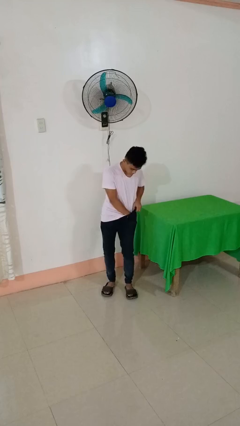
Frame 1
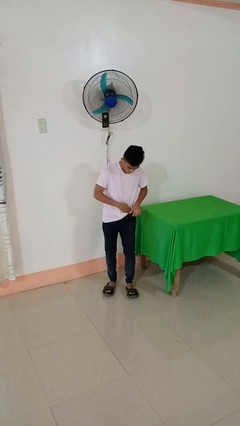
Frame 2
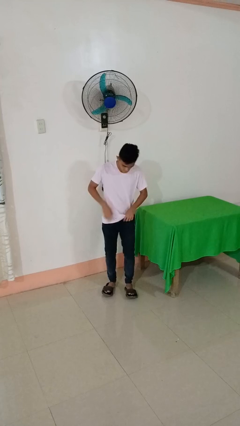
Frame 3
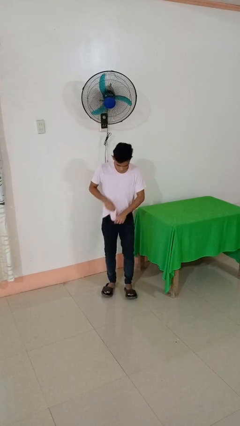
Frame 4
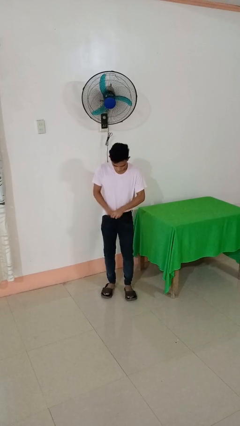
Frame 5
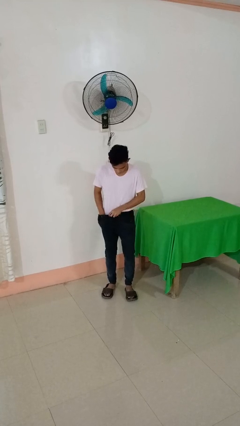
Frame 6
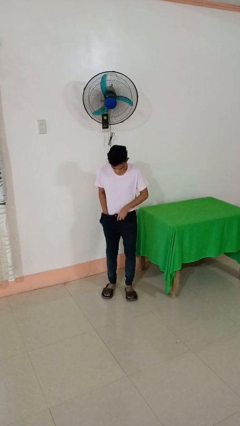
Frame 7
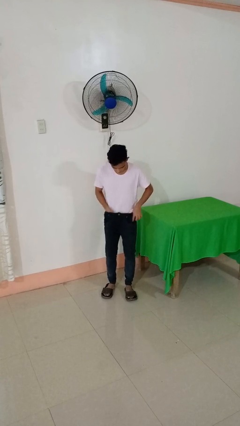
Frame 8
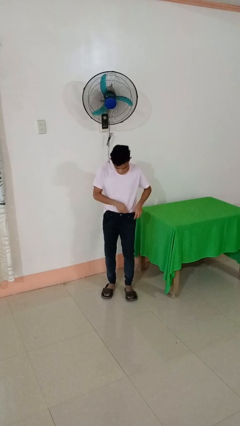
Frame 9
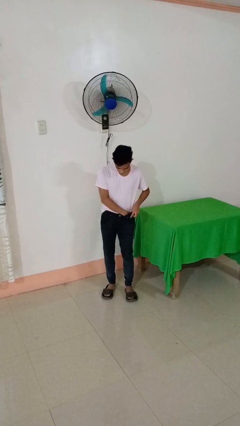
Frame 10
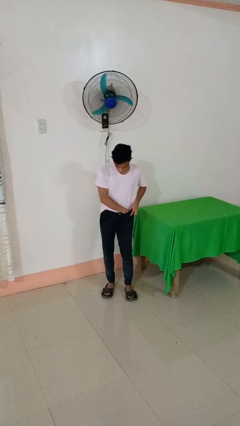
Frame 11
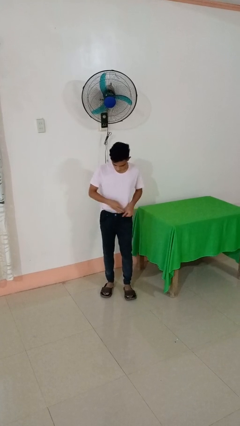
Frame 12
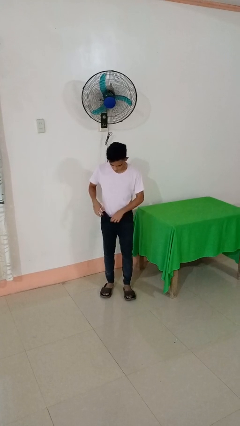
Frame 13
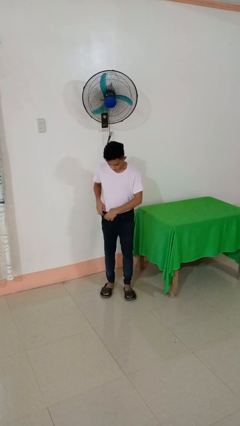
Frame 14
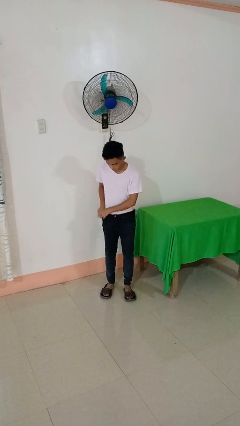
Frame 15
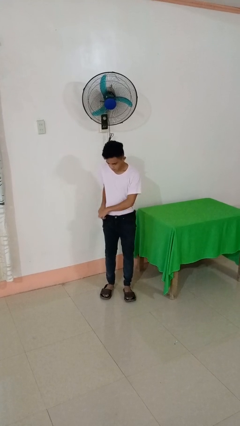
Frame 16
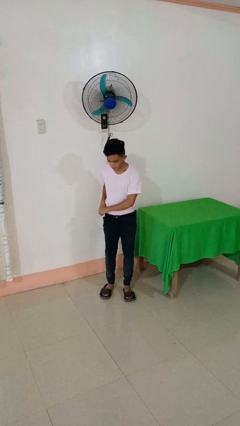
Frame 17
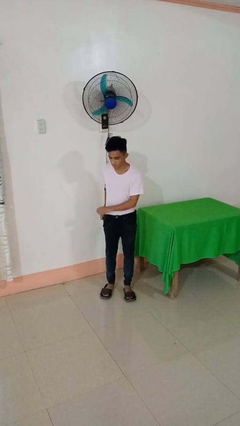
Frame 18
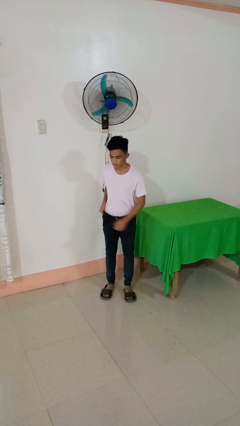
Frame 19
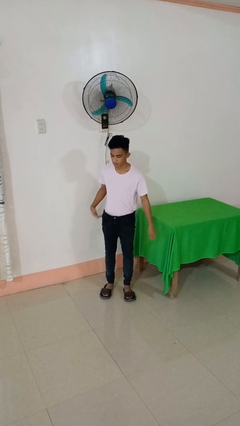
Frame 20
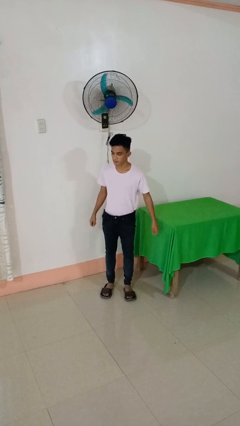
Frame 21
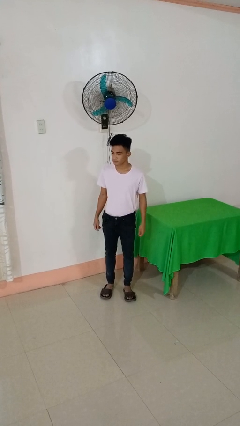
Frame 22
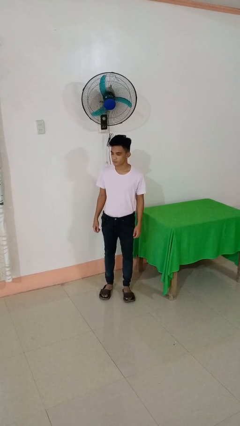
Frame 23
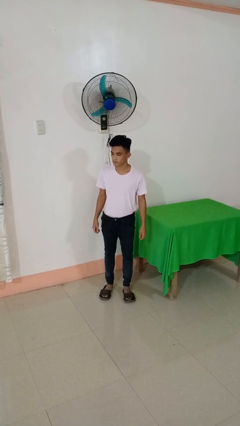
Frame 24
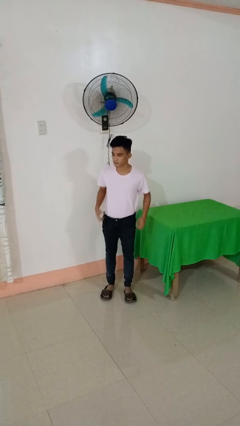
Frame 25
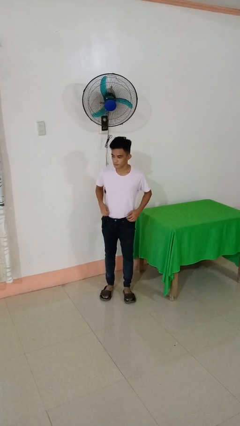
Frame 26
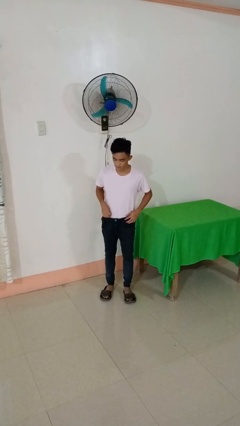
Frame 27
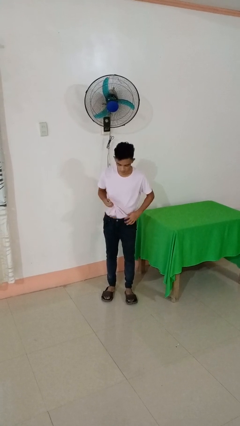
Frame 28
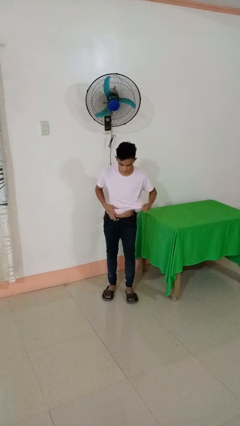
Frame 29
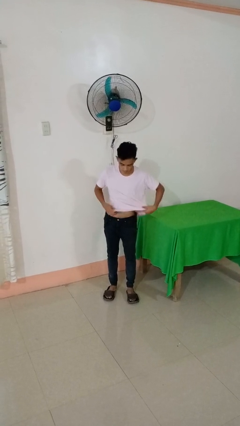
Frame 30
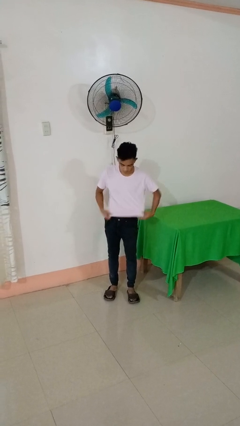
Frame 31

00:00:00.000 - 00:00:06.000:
person tucks in shirt

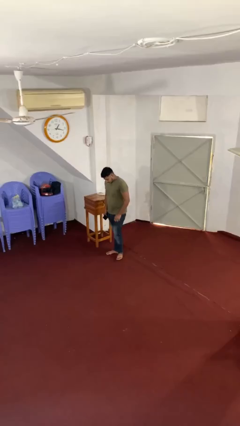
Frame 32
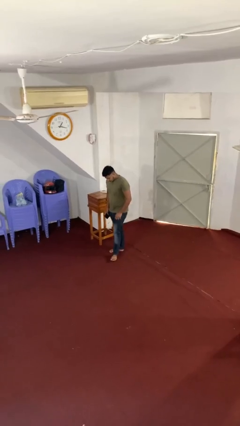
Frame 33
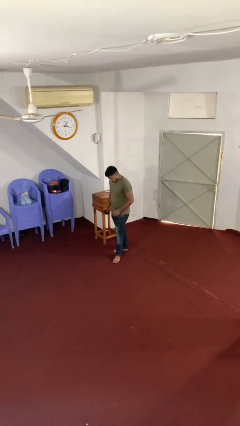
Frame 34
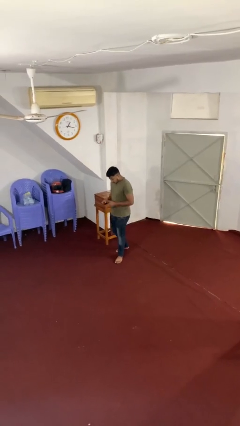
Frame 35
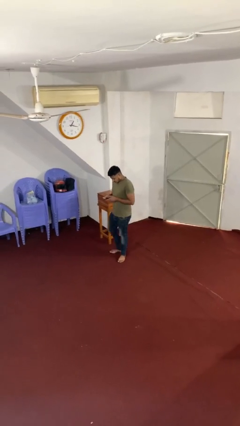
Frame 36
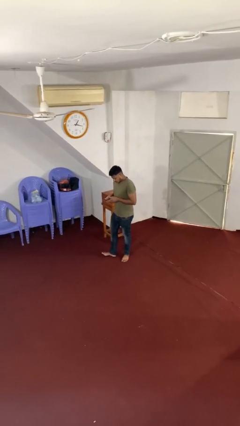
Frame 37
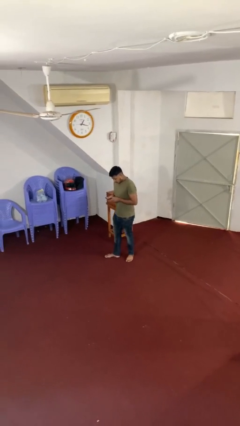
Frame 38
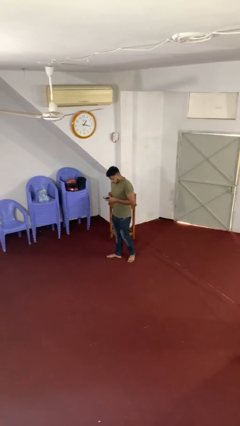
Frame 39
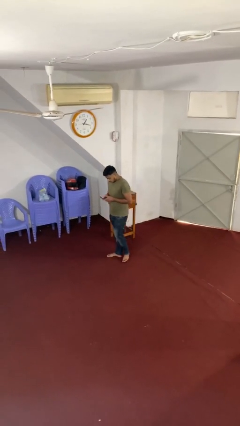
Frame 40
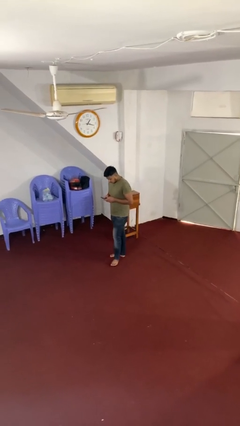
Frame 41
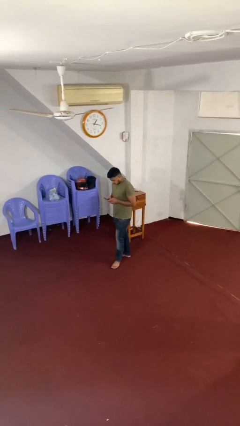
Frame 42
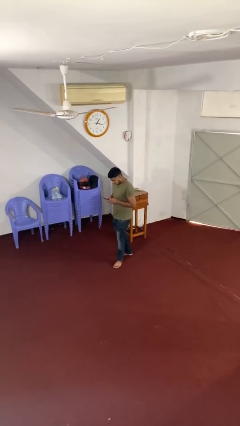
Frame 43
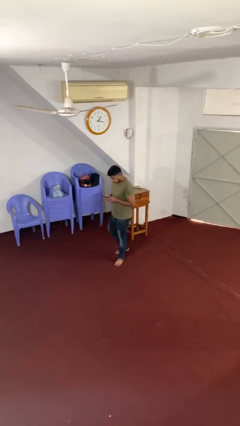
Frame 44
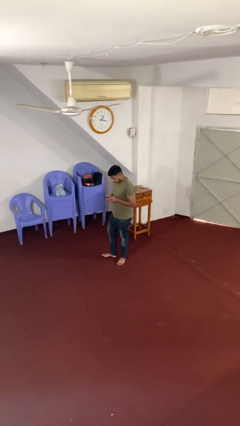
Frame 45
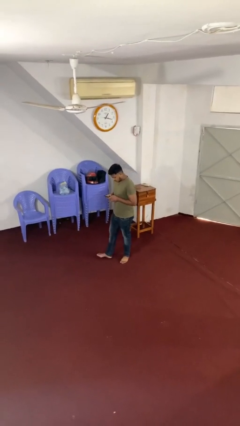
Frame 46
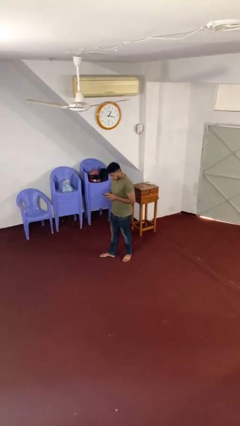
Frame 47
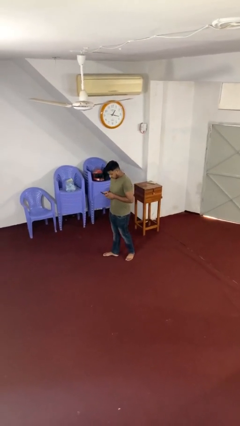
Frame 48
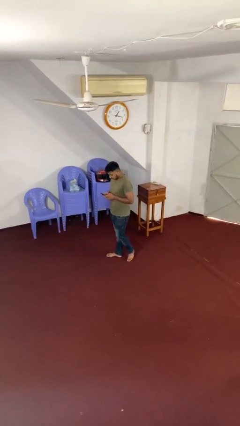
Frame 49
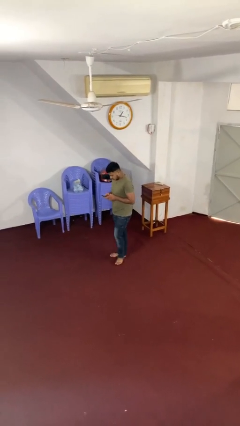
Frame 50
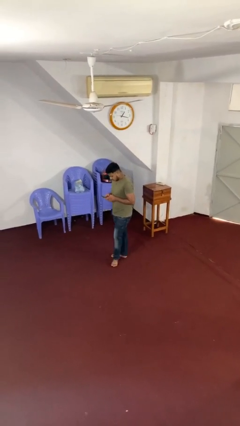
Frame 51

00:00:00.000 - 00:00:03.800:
person texts on phone

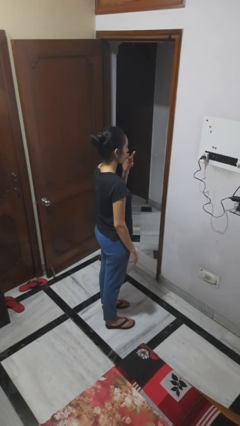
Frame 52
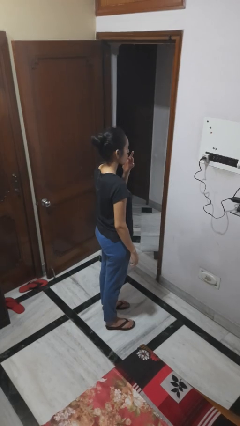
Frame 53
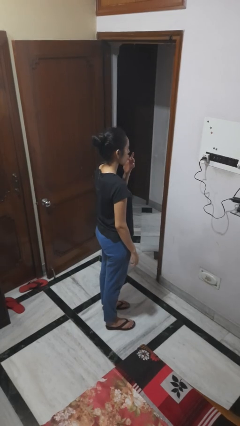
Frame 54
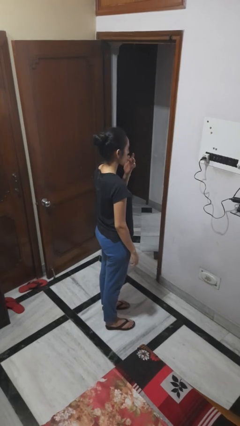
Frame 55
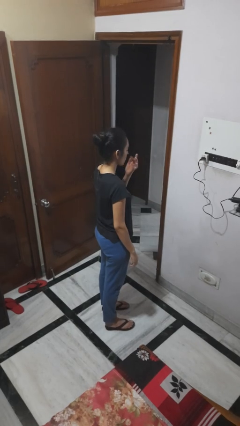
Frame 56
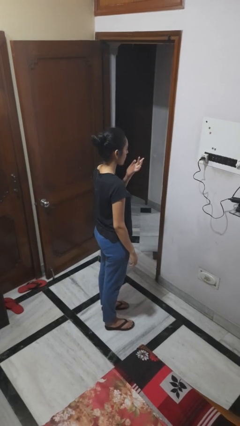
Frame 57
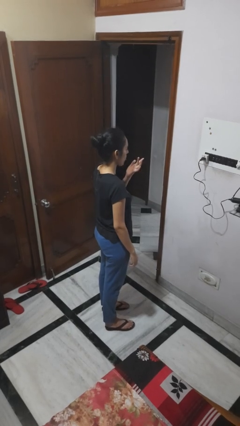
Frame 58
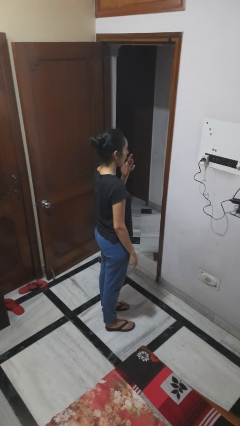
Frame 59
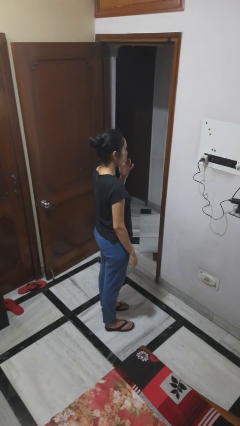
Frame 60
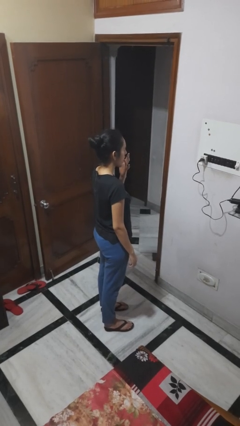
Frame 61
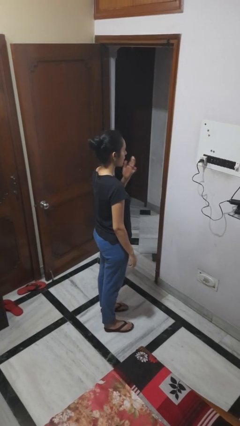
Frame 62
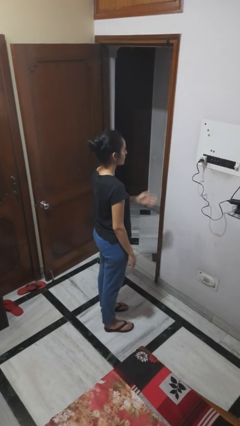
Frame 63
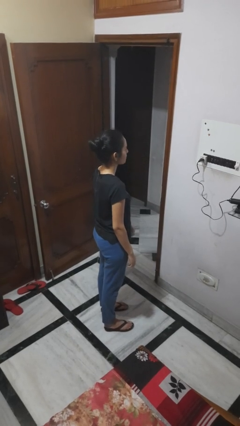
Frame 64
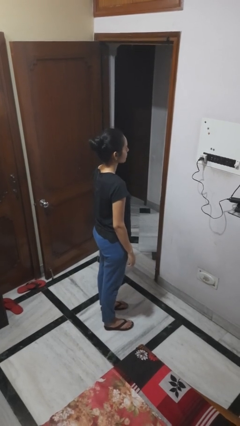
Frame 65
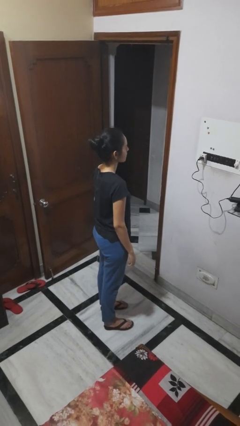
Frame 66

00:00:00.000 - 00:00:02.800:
person licks fingers

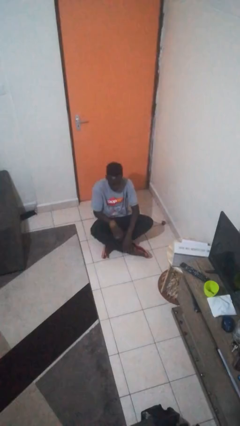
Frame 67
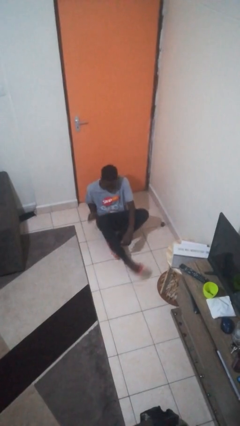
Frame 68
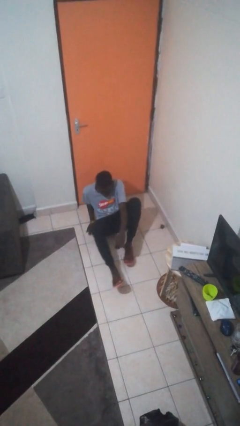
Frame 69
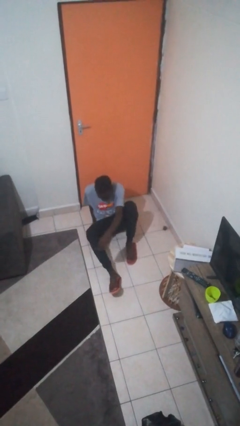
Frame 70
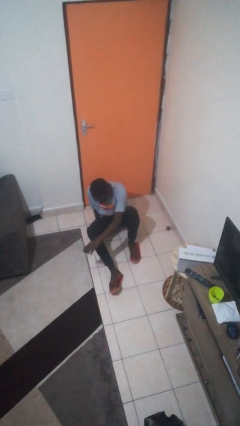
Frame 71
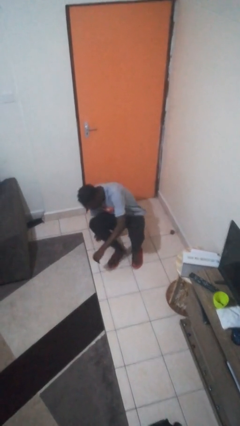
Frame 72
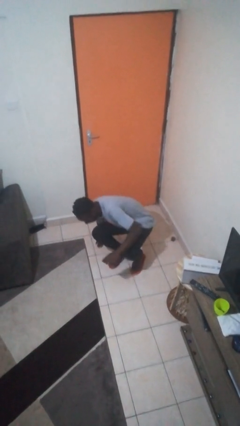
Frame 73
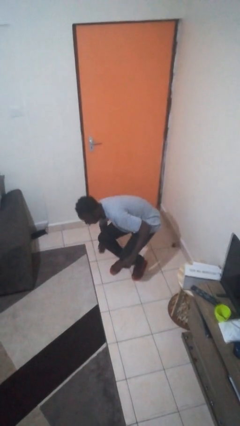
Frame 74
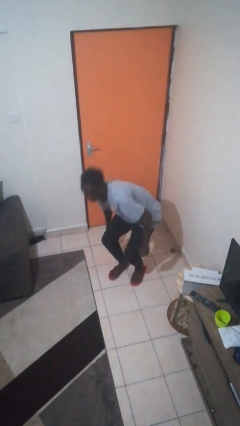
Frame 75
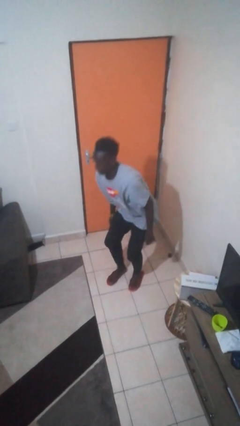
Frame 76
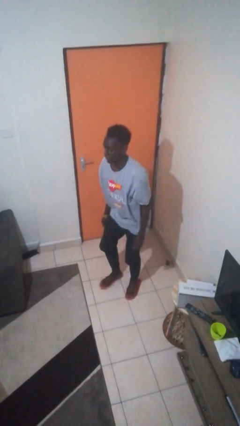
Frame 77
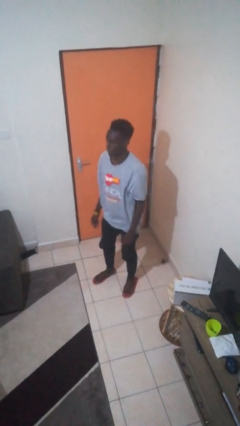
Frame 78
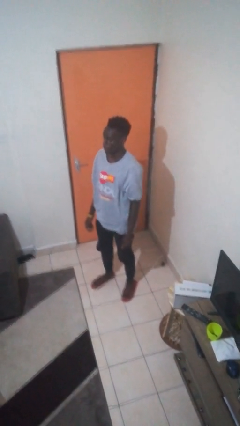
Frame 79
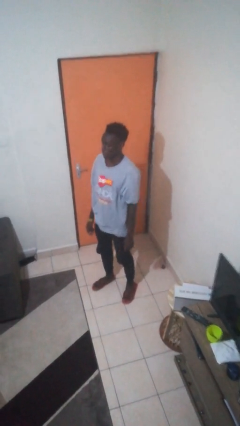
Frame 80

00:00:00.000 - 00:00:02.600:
person stands up from floor

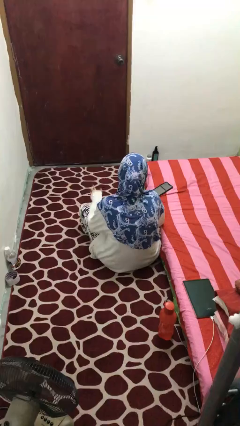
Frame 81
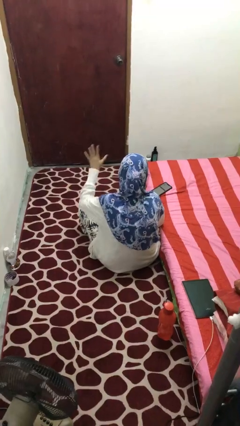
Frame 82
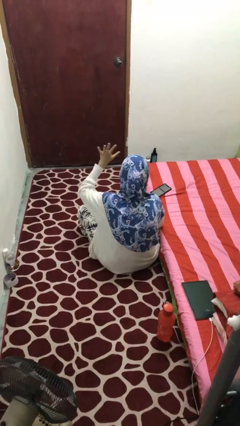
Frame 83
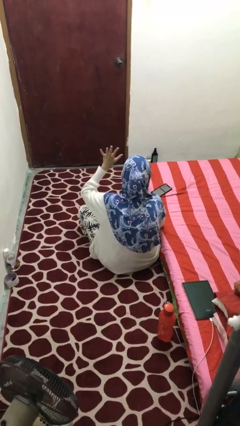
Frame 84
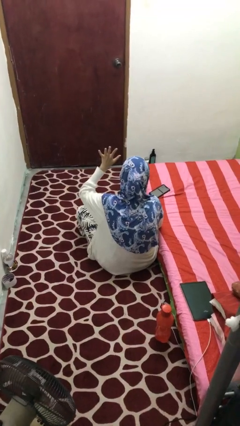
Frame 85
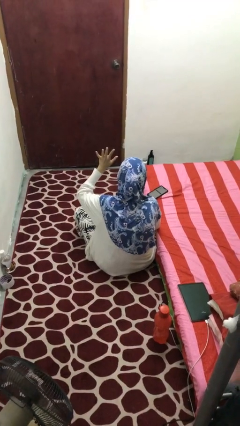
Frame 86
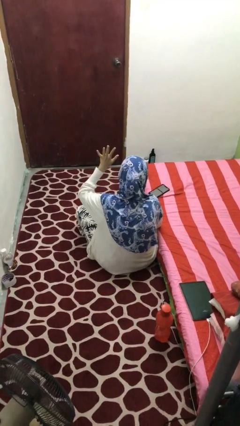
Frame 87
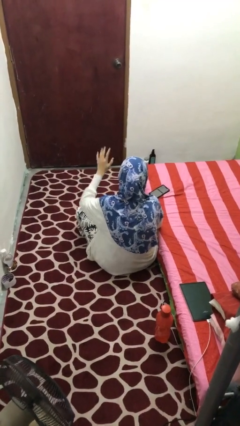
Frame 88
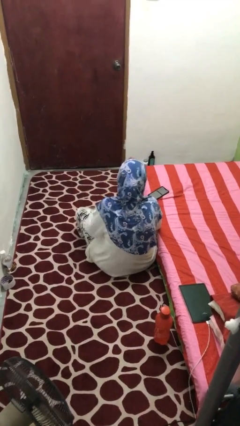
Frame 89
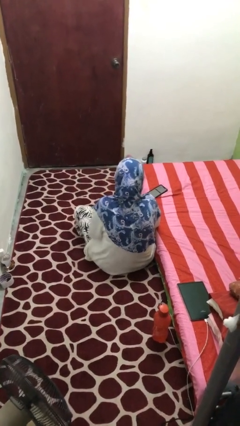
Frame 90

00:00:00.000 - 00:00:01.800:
person gestures number five

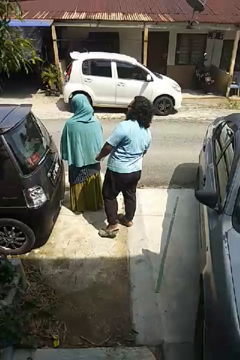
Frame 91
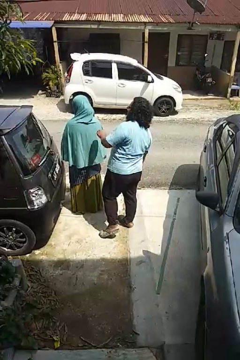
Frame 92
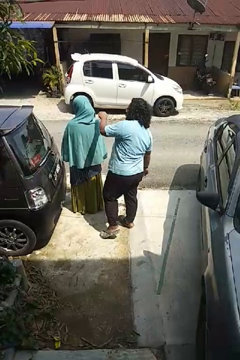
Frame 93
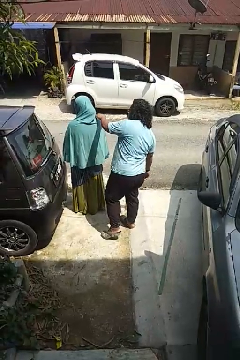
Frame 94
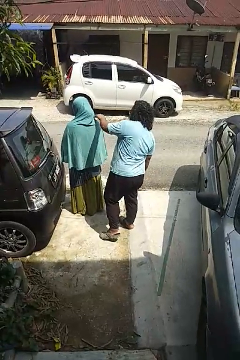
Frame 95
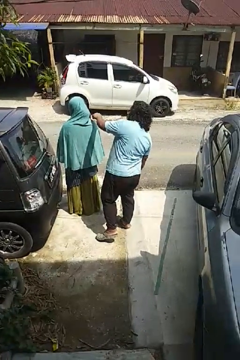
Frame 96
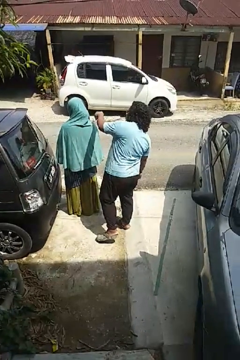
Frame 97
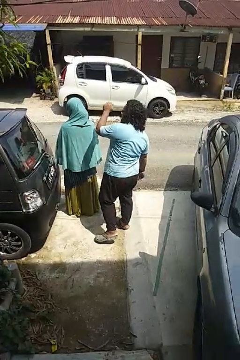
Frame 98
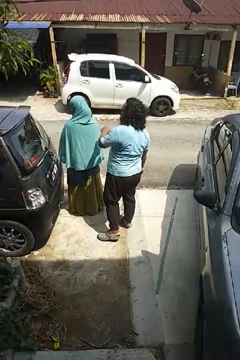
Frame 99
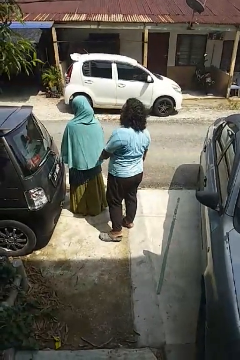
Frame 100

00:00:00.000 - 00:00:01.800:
person touches back of person
